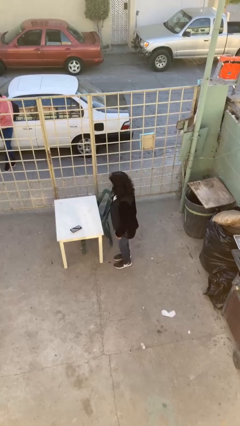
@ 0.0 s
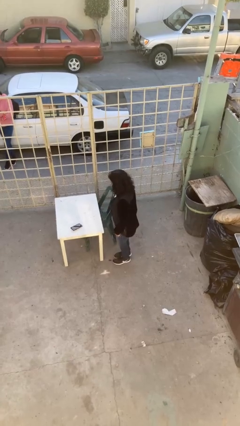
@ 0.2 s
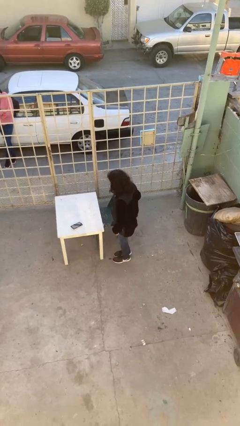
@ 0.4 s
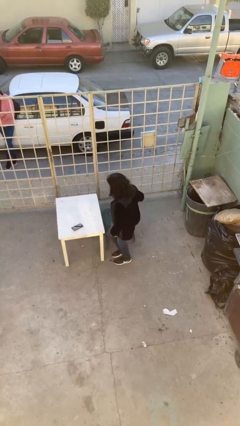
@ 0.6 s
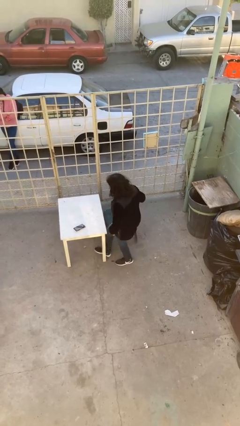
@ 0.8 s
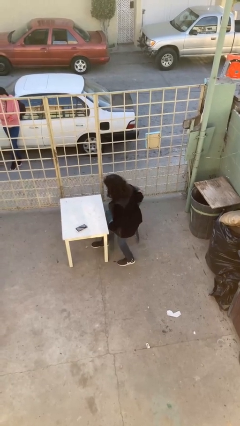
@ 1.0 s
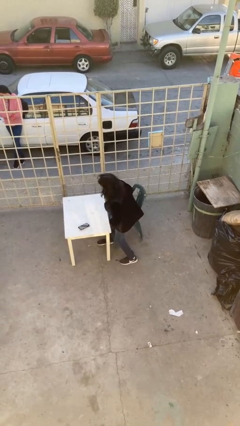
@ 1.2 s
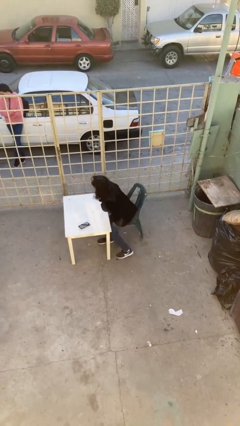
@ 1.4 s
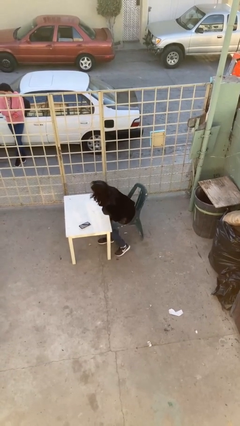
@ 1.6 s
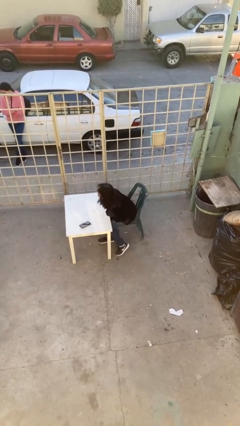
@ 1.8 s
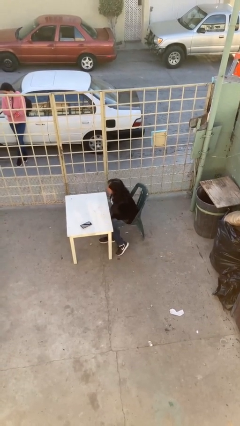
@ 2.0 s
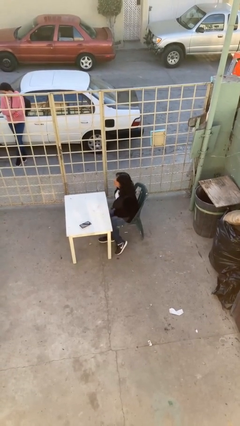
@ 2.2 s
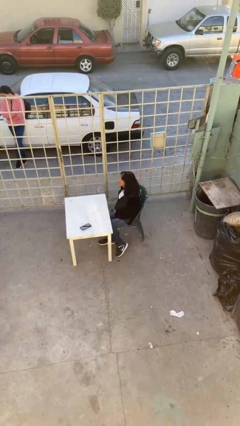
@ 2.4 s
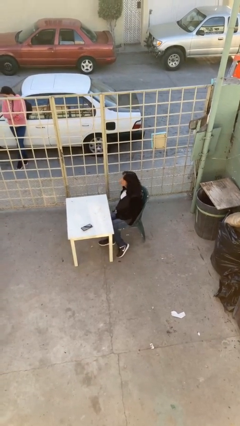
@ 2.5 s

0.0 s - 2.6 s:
person sits down

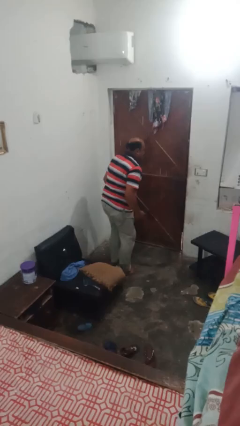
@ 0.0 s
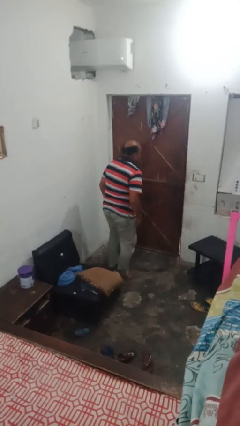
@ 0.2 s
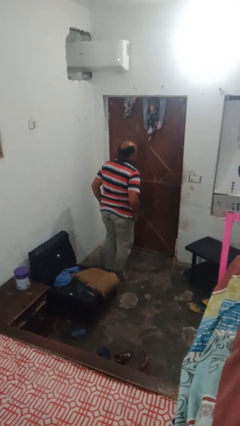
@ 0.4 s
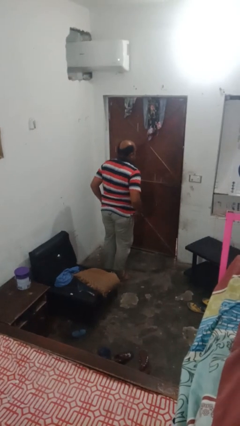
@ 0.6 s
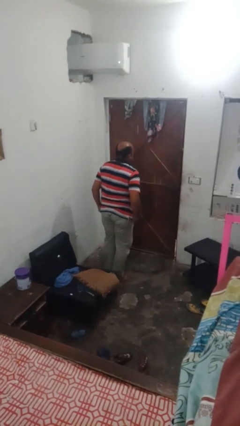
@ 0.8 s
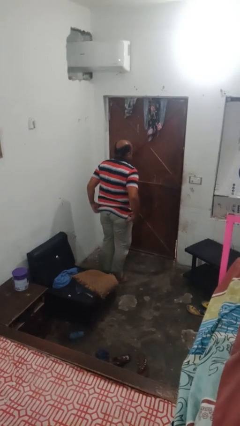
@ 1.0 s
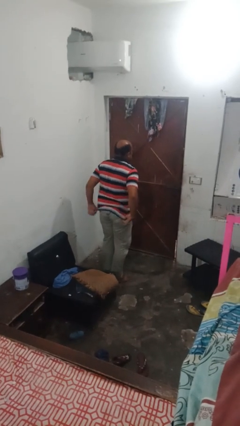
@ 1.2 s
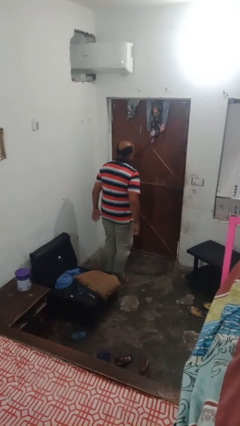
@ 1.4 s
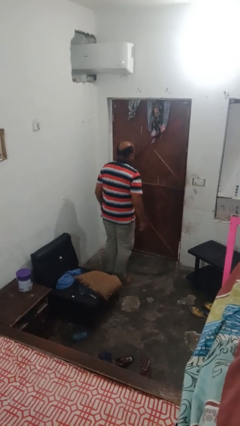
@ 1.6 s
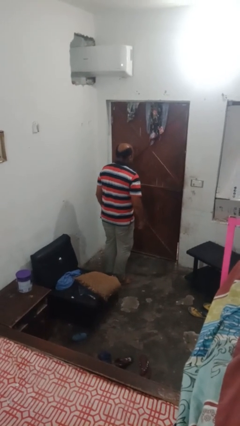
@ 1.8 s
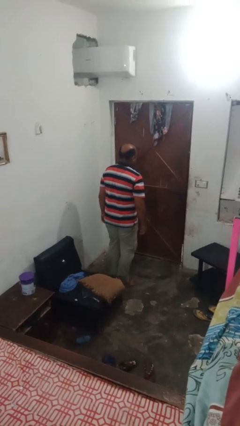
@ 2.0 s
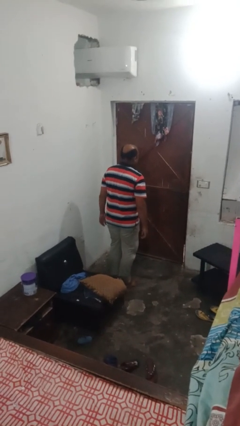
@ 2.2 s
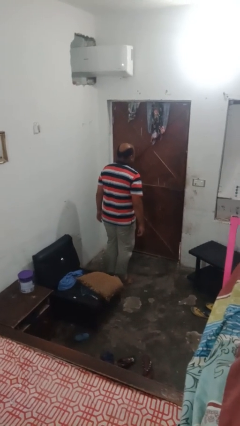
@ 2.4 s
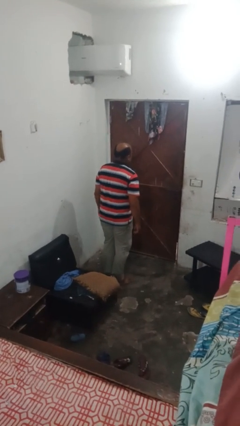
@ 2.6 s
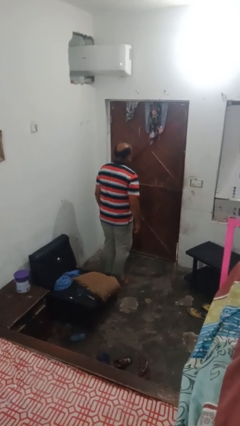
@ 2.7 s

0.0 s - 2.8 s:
person stands up from floor

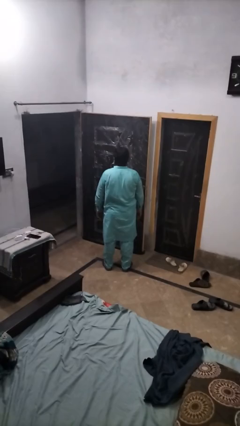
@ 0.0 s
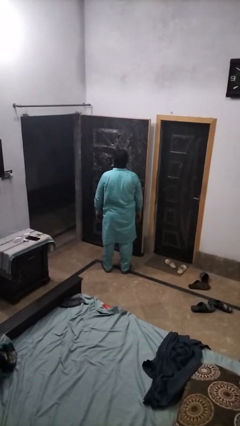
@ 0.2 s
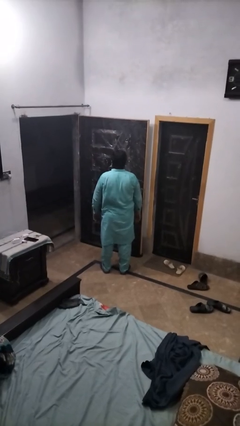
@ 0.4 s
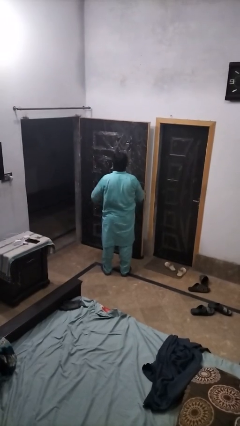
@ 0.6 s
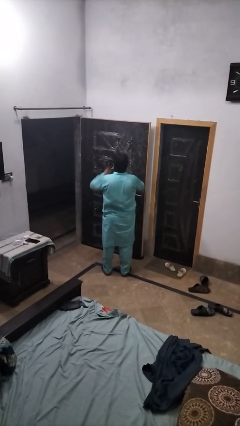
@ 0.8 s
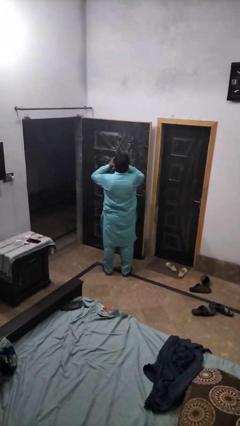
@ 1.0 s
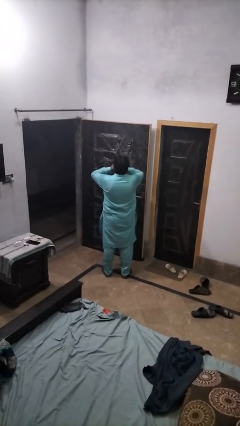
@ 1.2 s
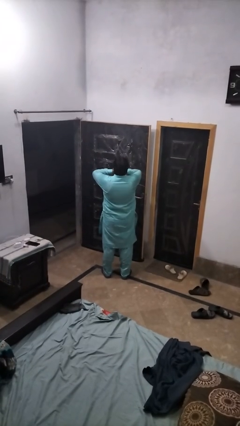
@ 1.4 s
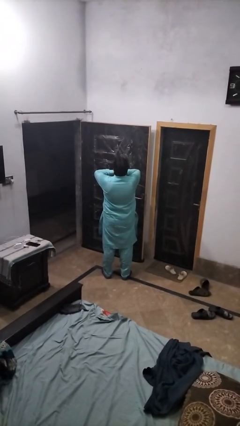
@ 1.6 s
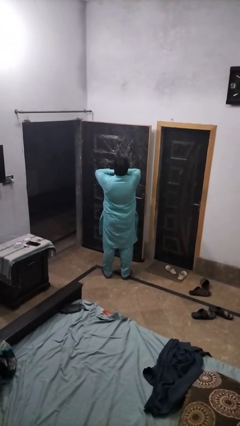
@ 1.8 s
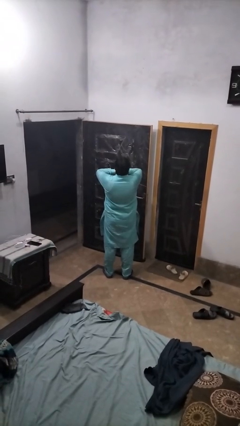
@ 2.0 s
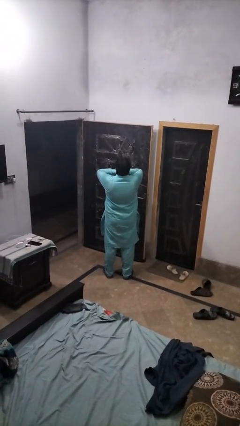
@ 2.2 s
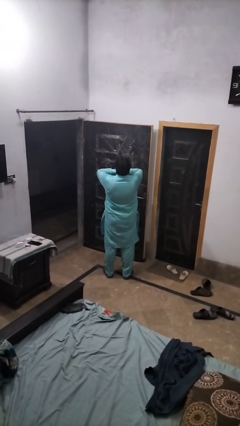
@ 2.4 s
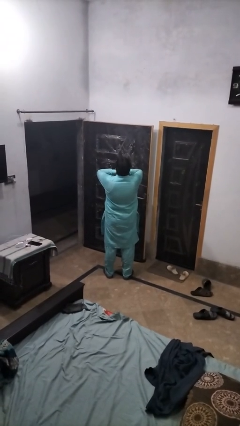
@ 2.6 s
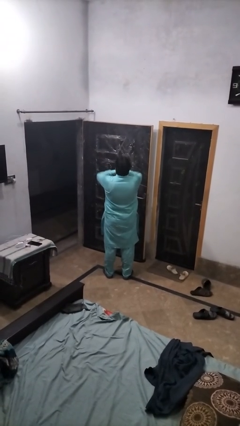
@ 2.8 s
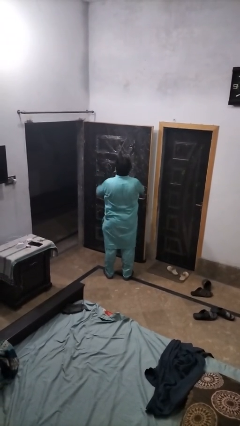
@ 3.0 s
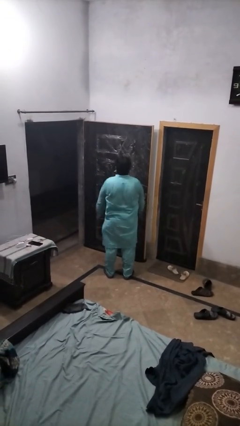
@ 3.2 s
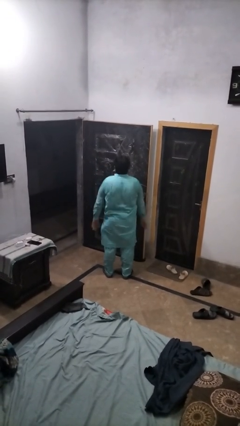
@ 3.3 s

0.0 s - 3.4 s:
person yawns

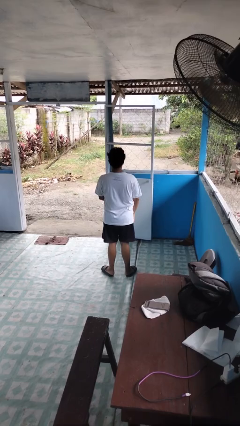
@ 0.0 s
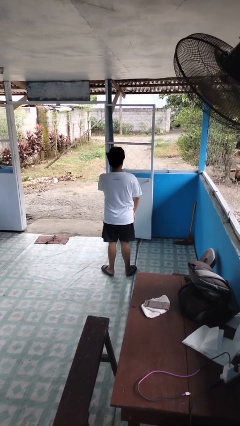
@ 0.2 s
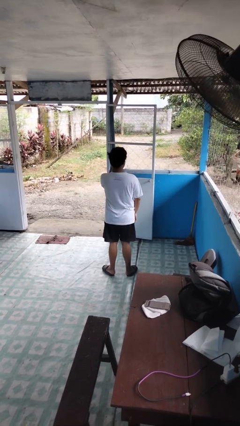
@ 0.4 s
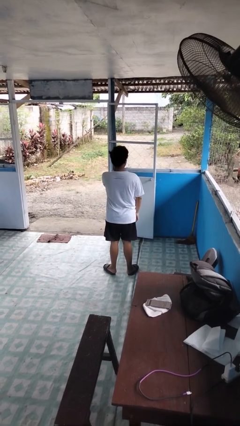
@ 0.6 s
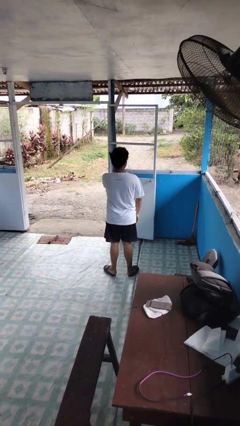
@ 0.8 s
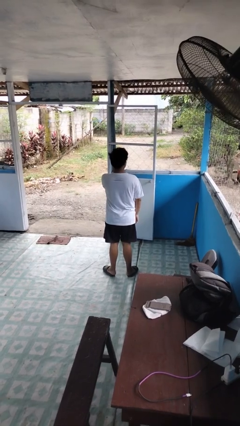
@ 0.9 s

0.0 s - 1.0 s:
person gestures call me

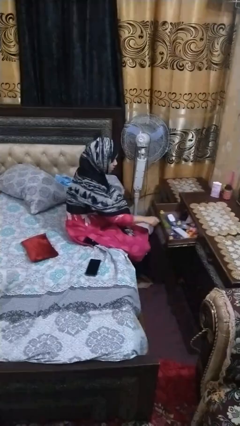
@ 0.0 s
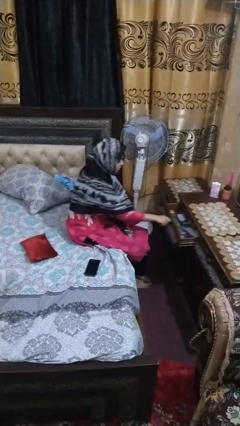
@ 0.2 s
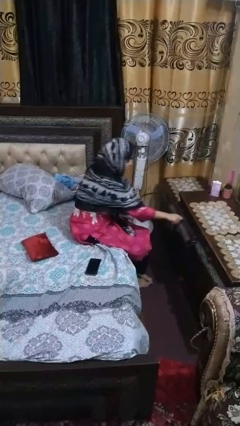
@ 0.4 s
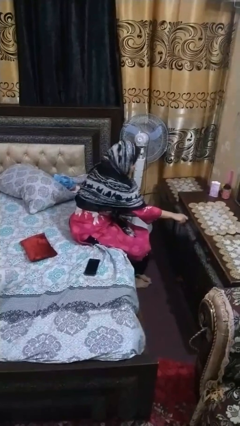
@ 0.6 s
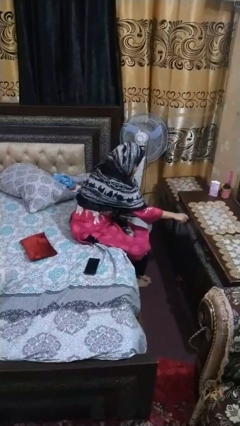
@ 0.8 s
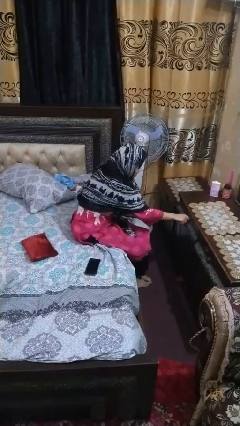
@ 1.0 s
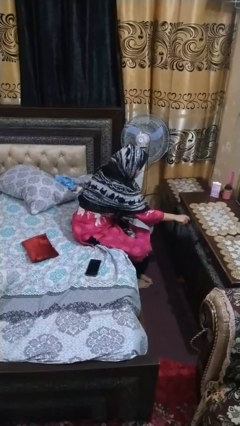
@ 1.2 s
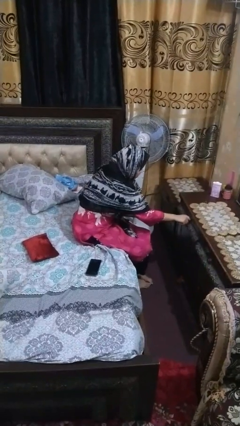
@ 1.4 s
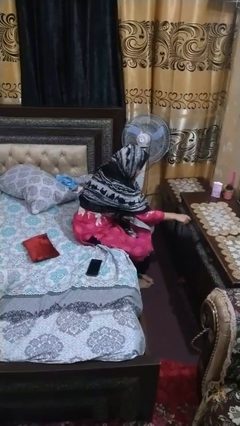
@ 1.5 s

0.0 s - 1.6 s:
person closes dresser drawer

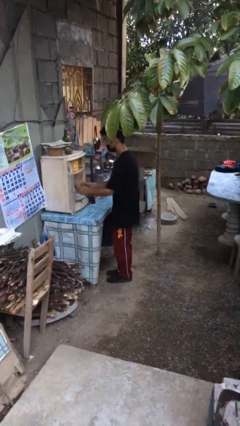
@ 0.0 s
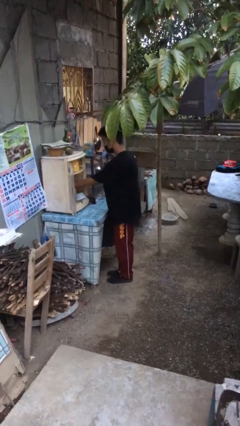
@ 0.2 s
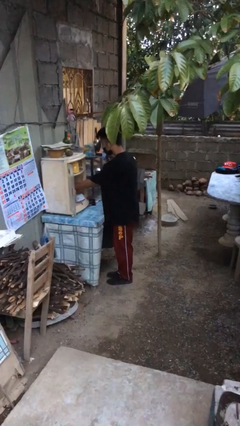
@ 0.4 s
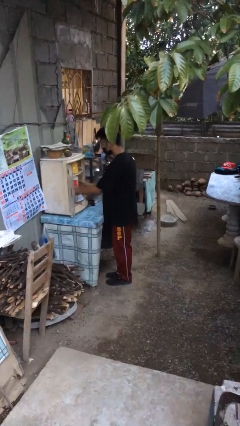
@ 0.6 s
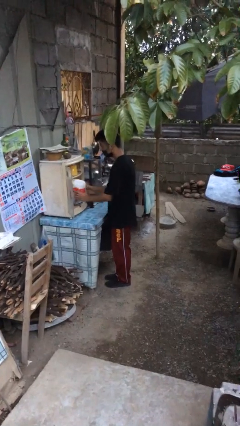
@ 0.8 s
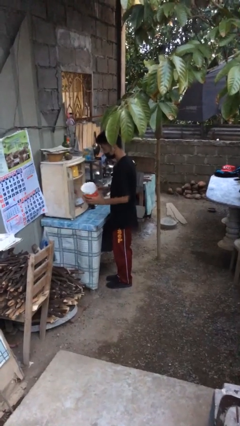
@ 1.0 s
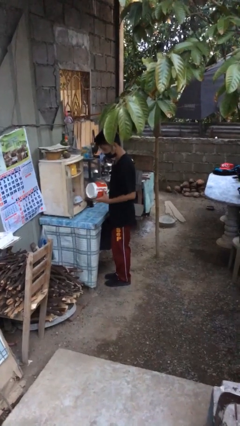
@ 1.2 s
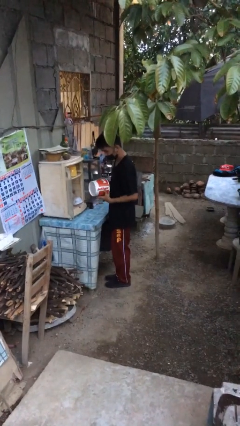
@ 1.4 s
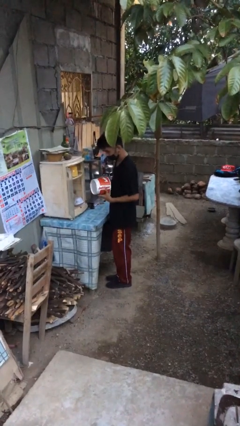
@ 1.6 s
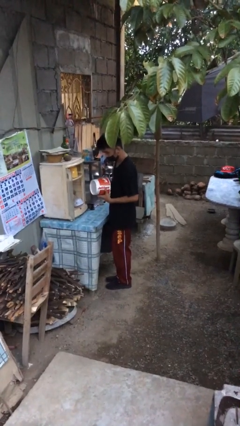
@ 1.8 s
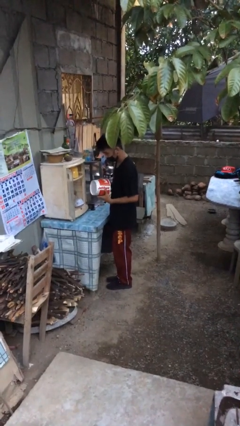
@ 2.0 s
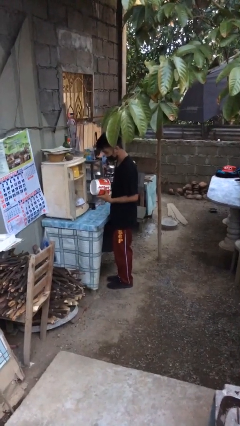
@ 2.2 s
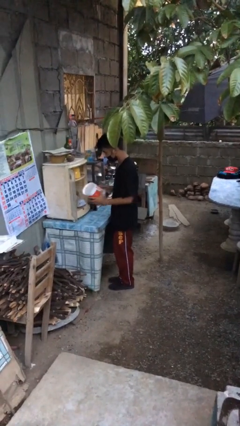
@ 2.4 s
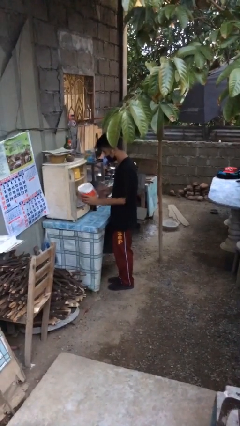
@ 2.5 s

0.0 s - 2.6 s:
person picks up object from cabinet

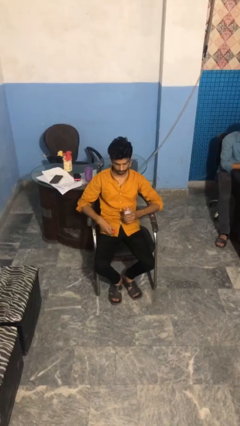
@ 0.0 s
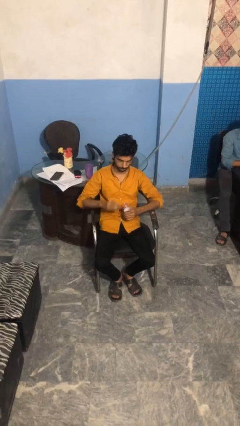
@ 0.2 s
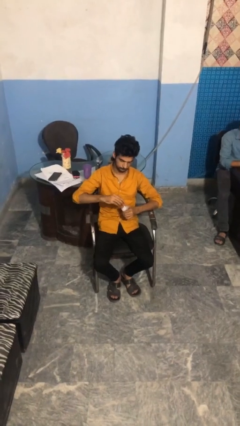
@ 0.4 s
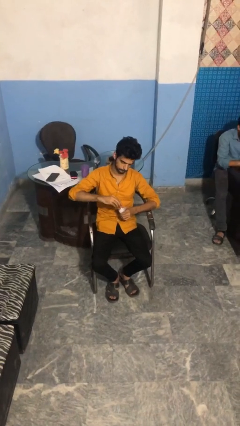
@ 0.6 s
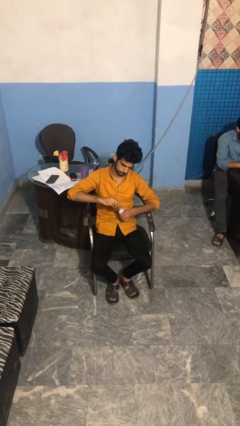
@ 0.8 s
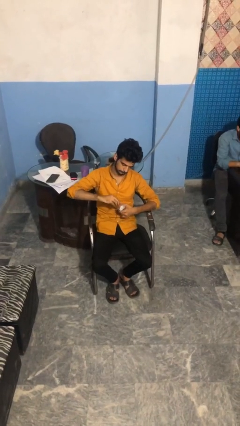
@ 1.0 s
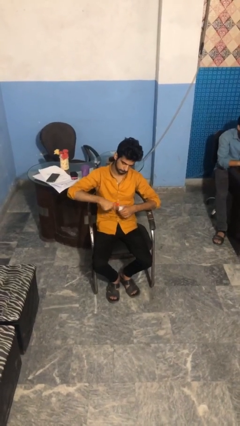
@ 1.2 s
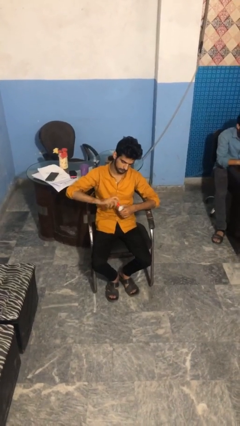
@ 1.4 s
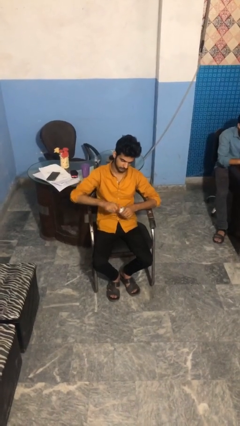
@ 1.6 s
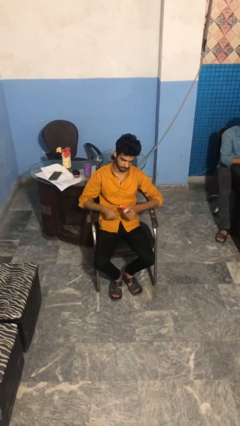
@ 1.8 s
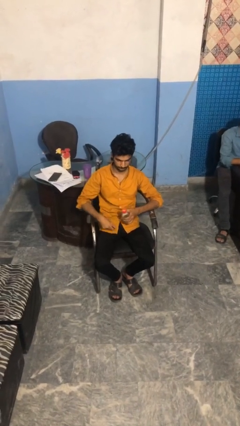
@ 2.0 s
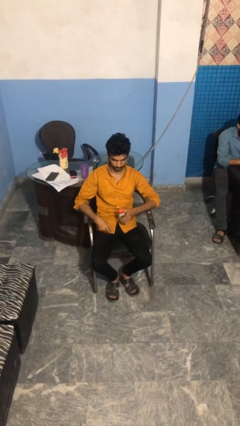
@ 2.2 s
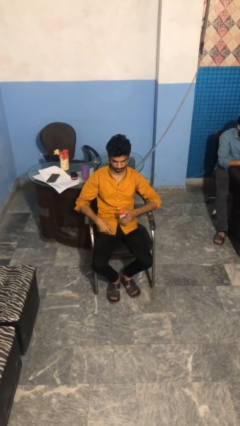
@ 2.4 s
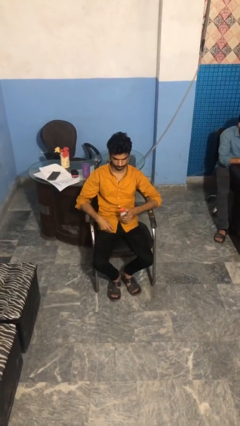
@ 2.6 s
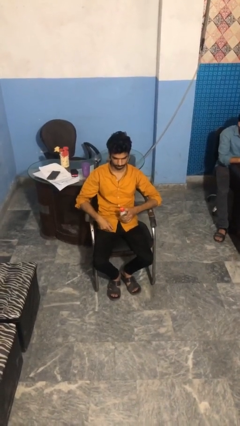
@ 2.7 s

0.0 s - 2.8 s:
person screws lid to bottle
